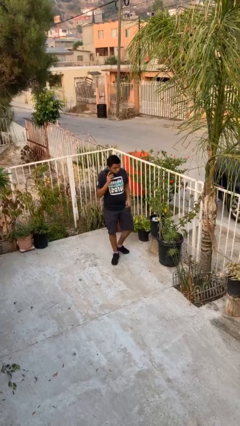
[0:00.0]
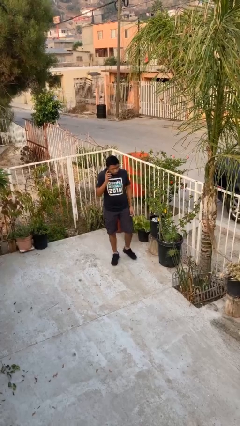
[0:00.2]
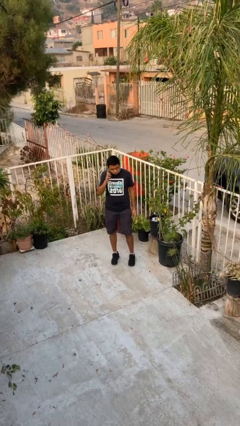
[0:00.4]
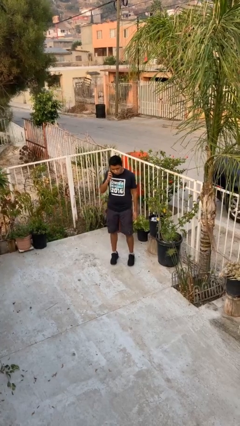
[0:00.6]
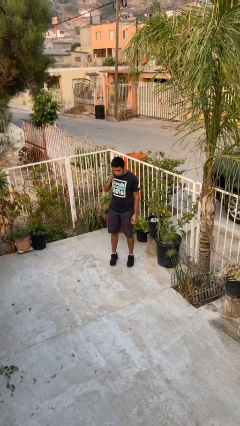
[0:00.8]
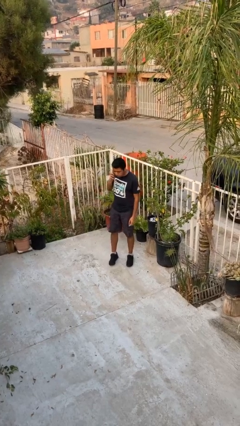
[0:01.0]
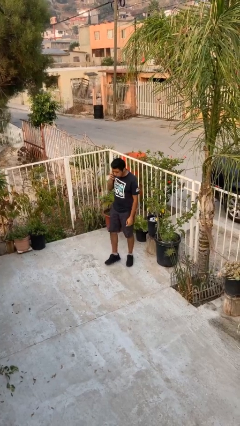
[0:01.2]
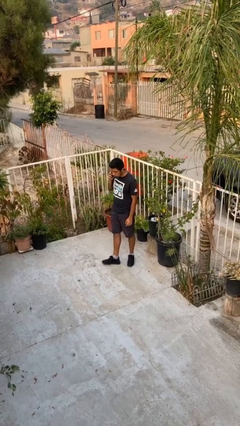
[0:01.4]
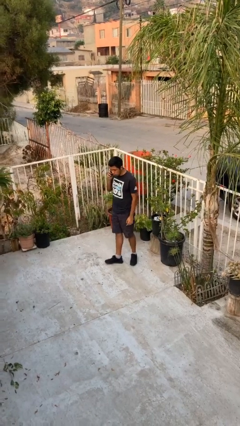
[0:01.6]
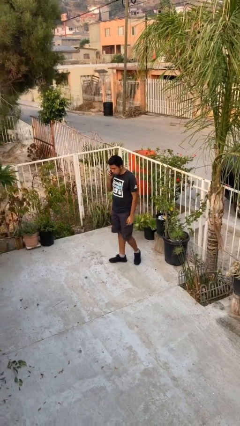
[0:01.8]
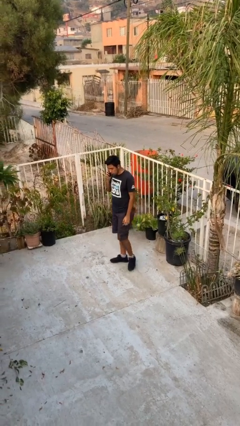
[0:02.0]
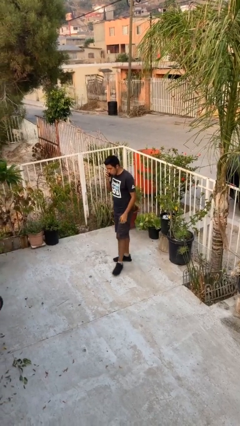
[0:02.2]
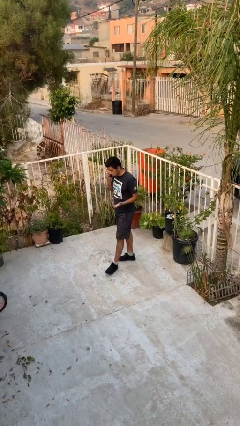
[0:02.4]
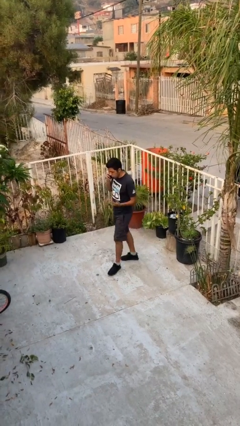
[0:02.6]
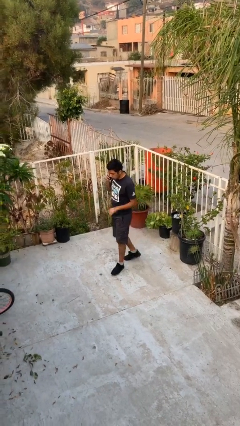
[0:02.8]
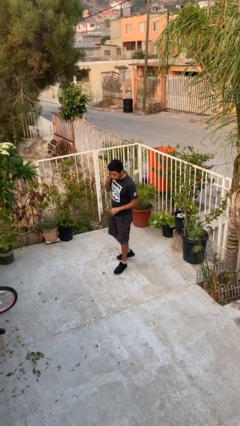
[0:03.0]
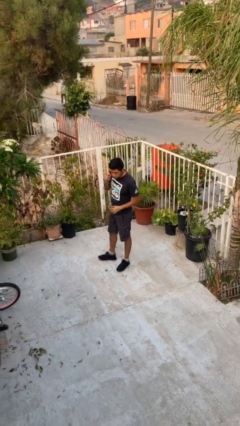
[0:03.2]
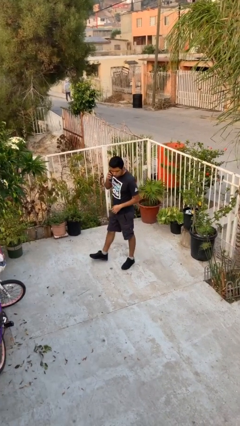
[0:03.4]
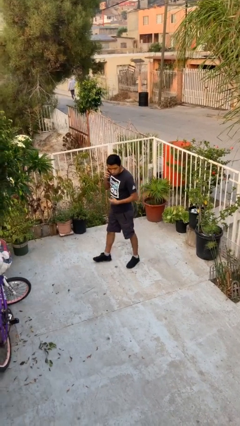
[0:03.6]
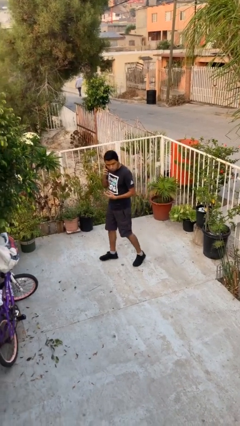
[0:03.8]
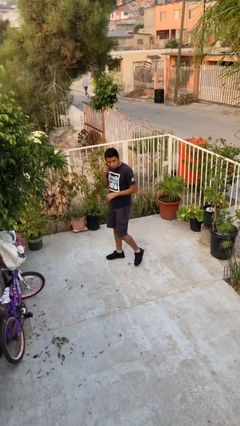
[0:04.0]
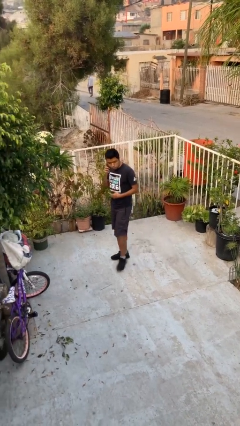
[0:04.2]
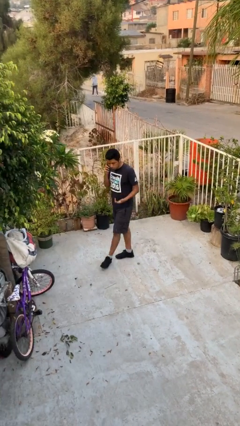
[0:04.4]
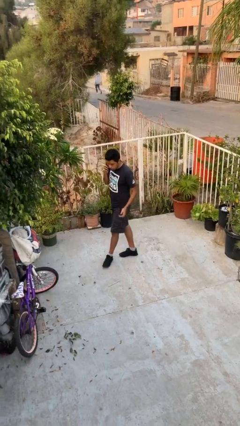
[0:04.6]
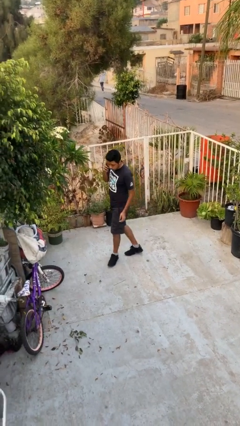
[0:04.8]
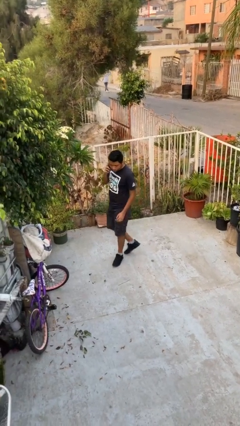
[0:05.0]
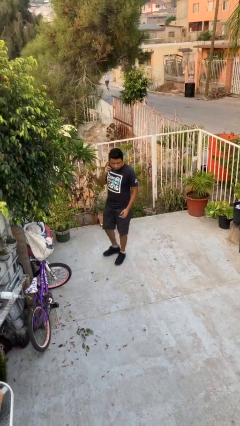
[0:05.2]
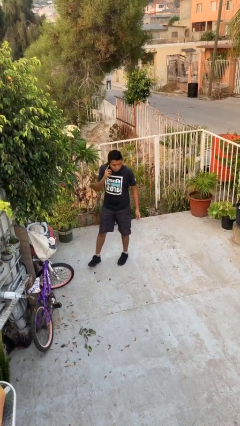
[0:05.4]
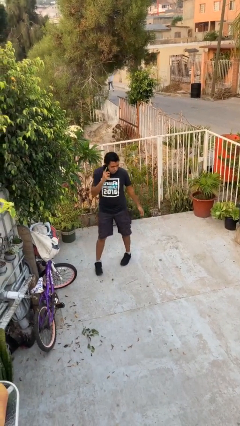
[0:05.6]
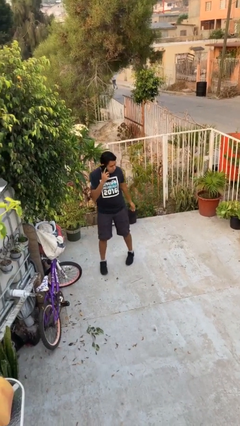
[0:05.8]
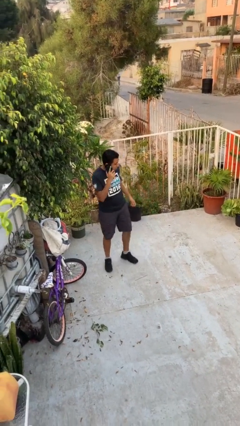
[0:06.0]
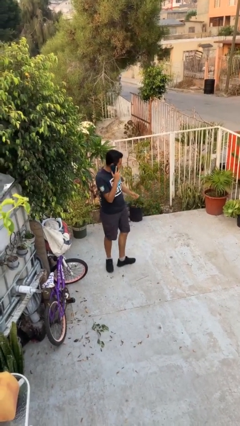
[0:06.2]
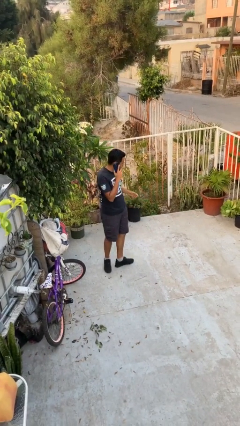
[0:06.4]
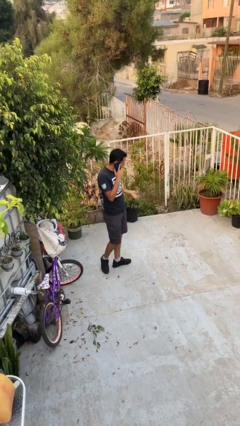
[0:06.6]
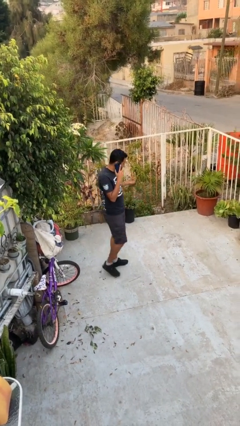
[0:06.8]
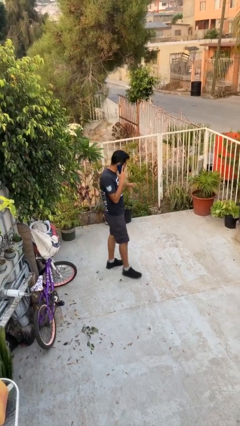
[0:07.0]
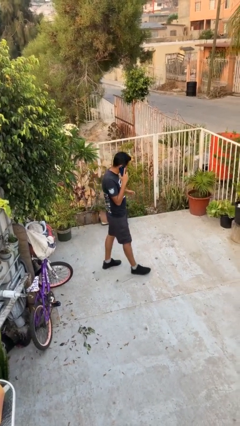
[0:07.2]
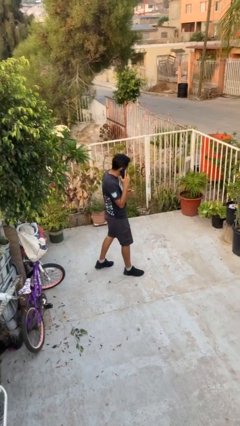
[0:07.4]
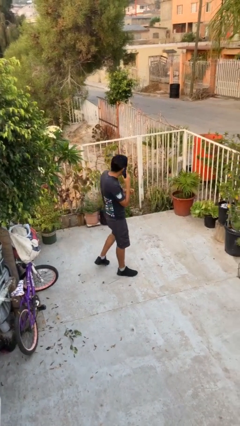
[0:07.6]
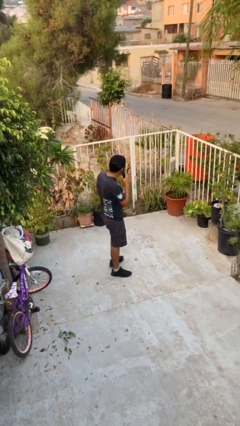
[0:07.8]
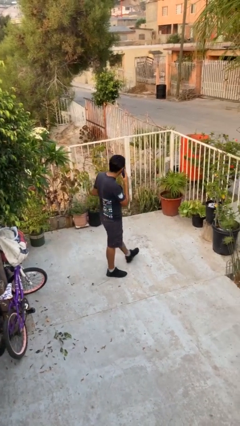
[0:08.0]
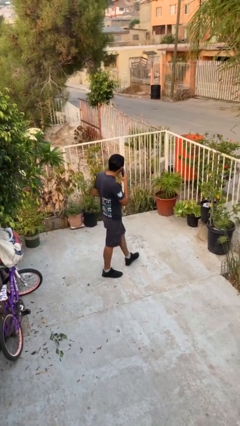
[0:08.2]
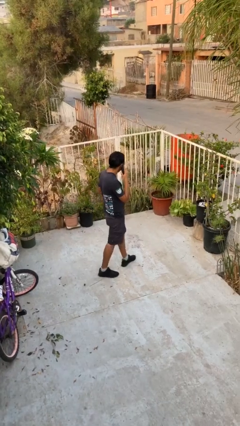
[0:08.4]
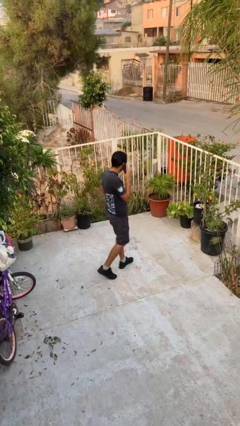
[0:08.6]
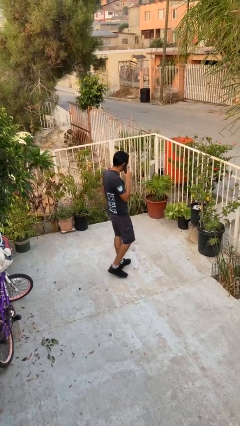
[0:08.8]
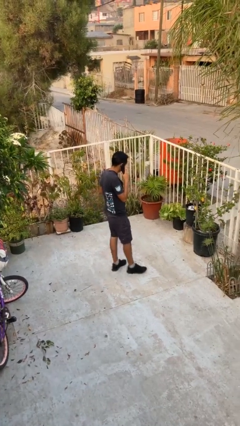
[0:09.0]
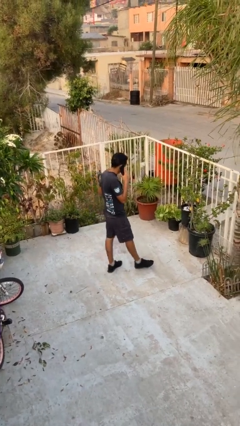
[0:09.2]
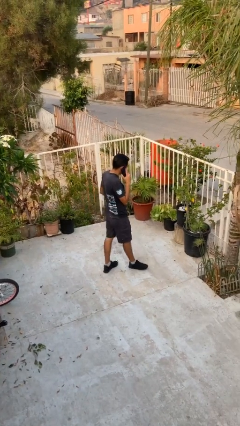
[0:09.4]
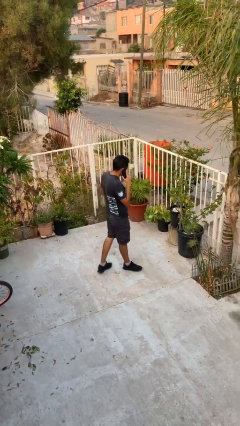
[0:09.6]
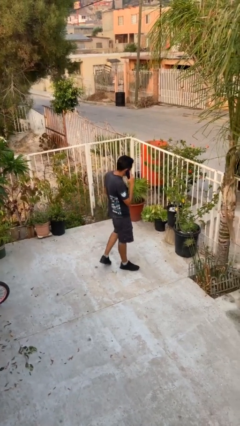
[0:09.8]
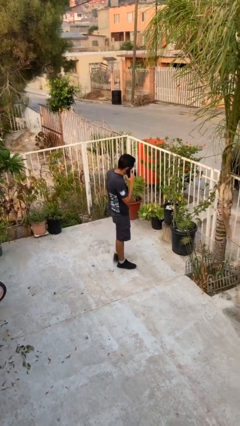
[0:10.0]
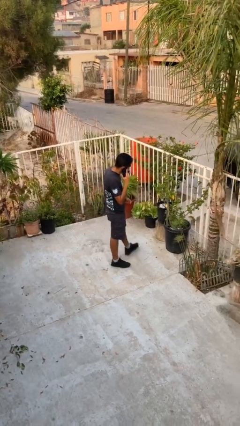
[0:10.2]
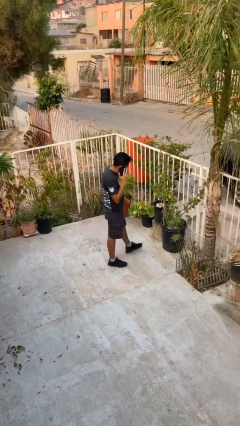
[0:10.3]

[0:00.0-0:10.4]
person talks on phone

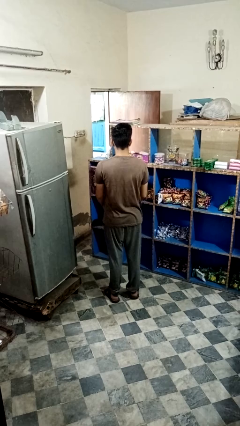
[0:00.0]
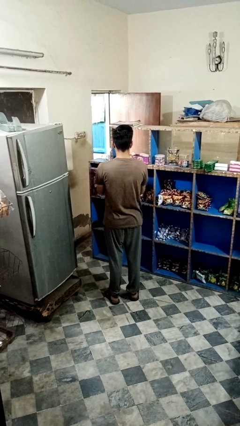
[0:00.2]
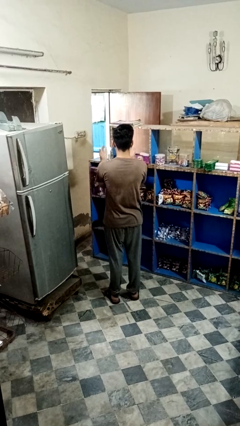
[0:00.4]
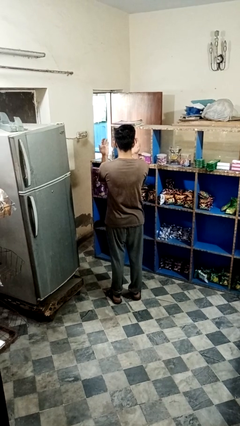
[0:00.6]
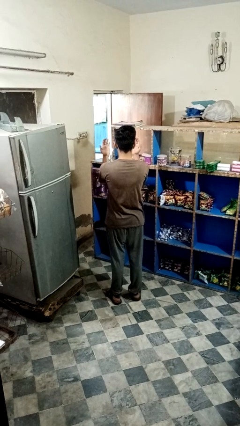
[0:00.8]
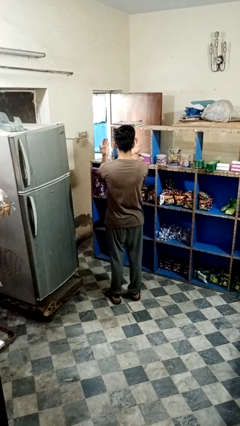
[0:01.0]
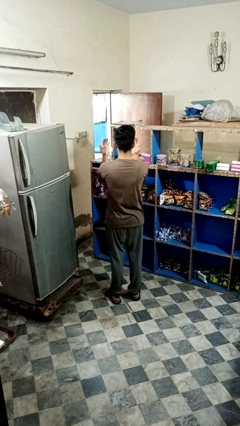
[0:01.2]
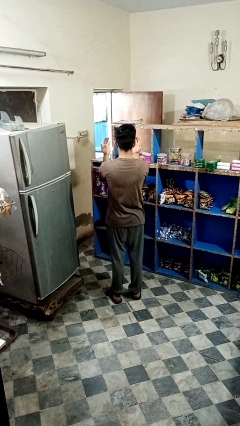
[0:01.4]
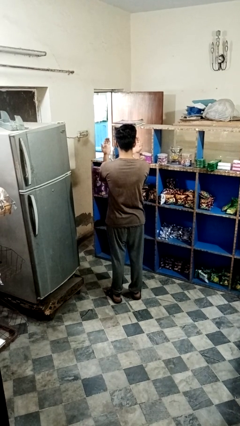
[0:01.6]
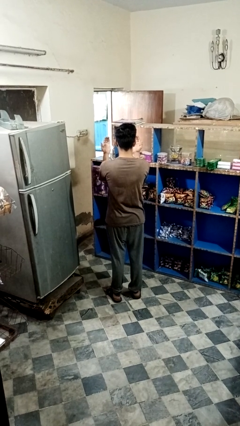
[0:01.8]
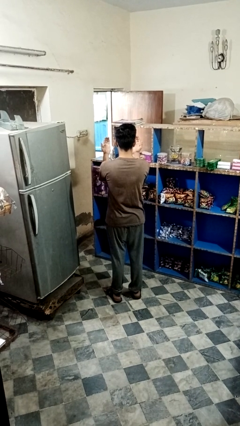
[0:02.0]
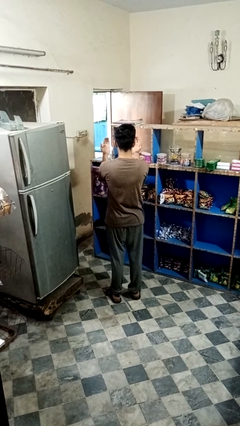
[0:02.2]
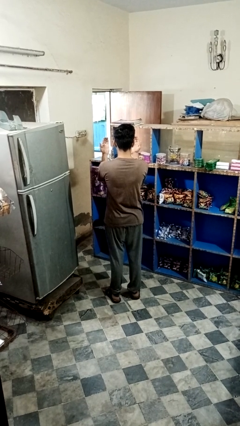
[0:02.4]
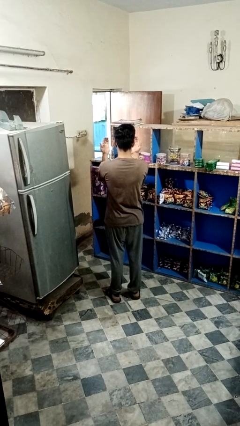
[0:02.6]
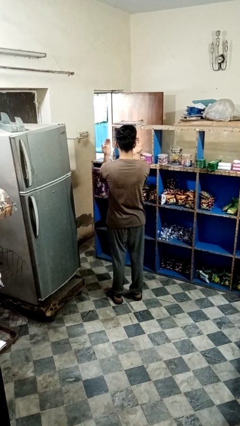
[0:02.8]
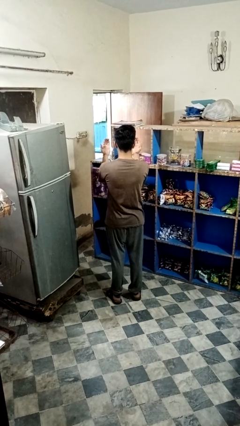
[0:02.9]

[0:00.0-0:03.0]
person prays

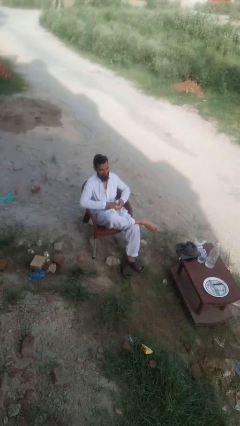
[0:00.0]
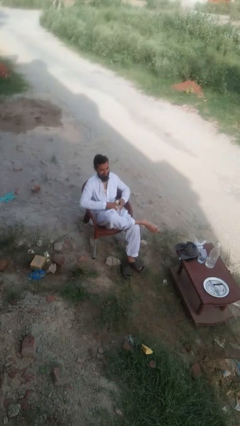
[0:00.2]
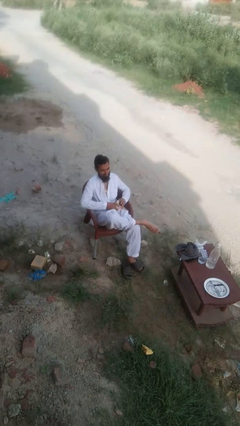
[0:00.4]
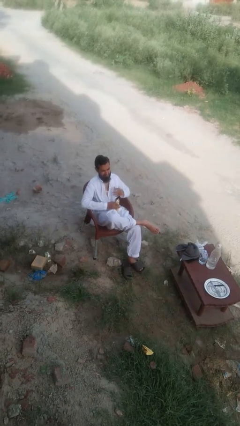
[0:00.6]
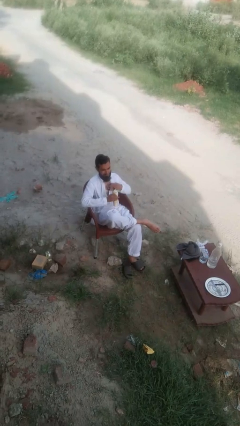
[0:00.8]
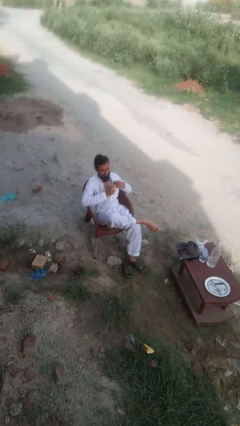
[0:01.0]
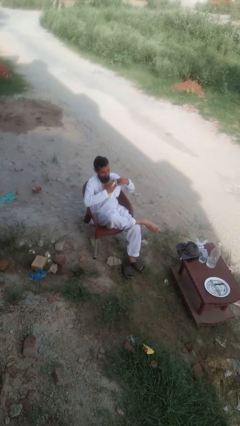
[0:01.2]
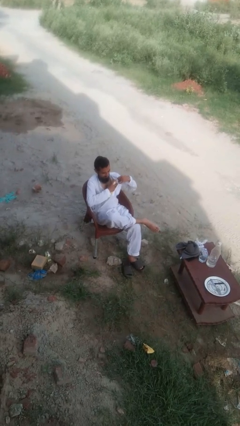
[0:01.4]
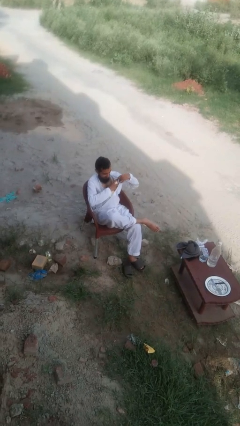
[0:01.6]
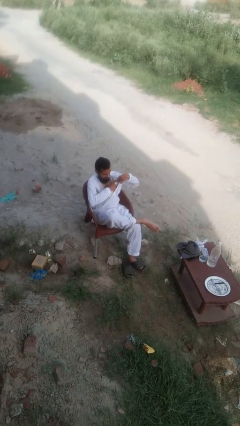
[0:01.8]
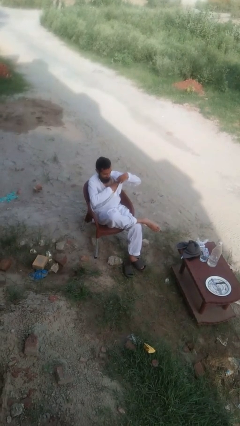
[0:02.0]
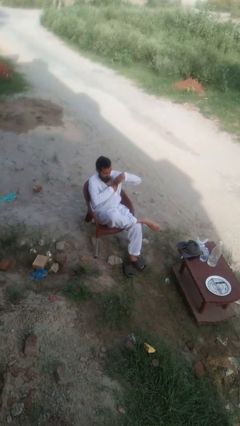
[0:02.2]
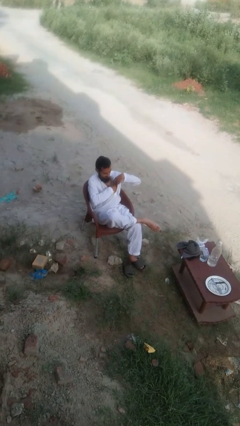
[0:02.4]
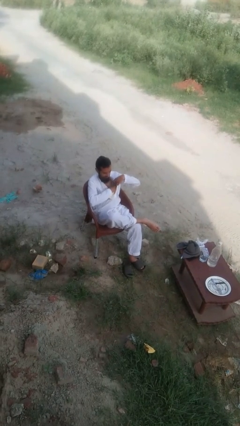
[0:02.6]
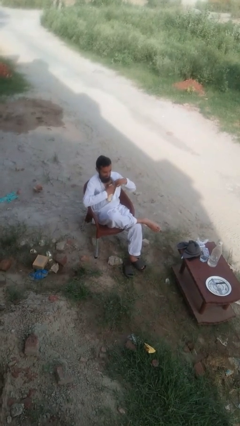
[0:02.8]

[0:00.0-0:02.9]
person applies deodorant

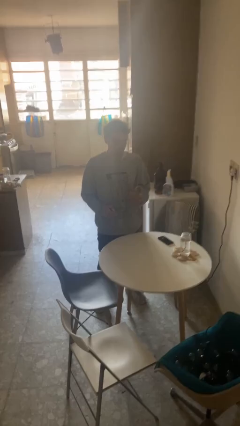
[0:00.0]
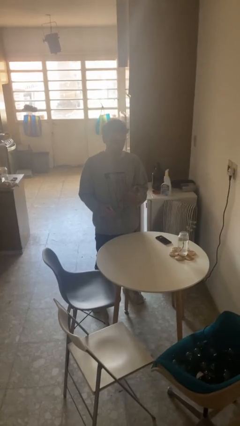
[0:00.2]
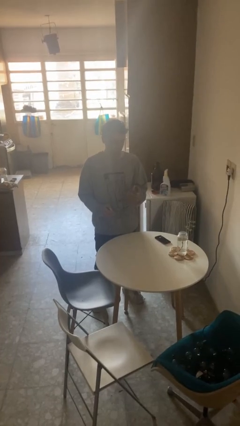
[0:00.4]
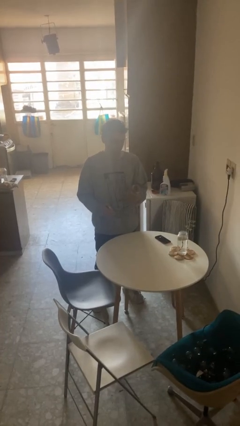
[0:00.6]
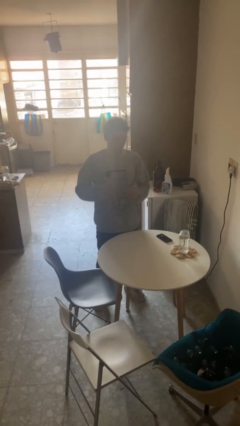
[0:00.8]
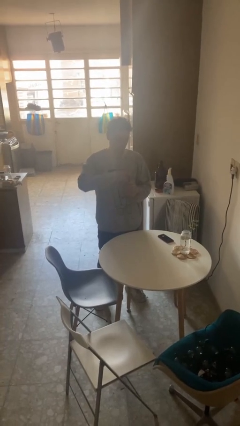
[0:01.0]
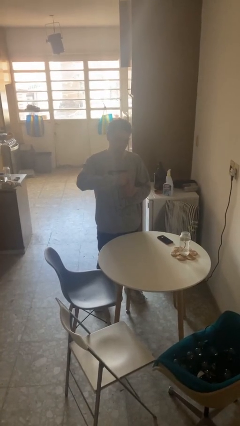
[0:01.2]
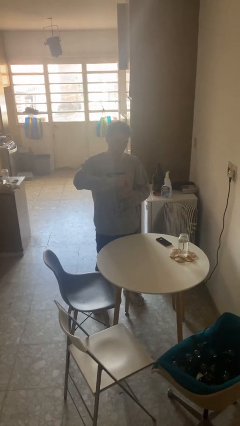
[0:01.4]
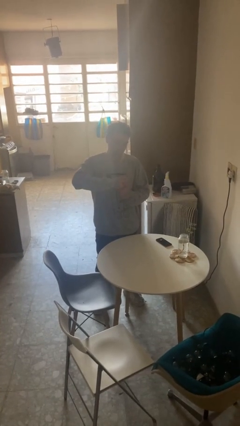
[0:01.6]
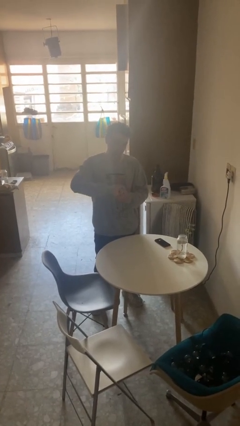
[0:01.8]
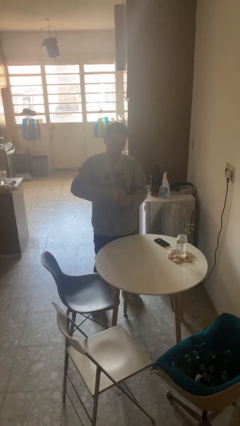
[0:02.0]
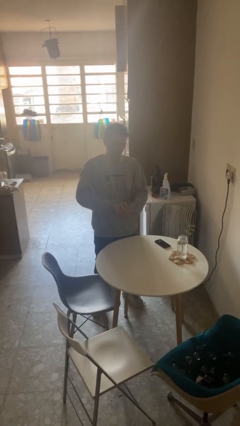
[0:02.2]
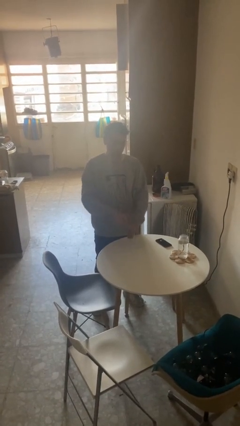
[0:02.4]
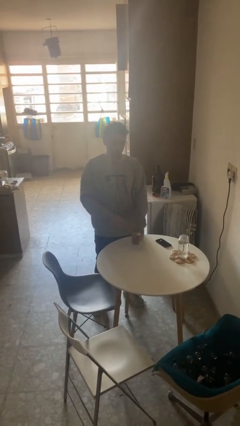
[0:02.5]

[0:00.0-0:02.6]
person closes jar
